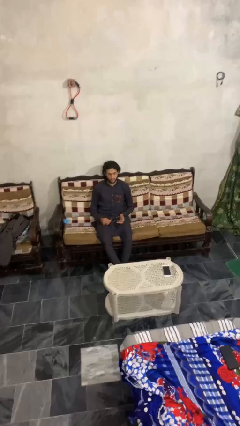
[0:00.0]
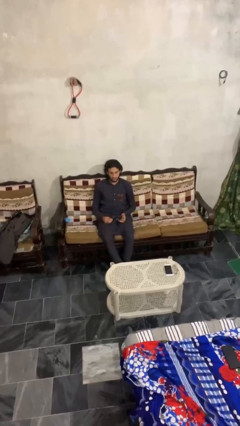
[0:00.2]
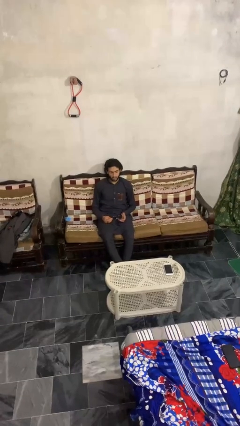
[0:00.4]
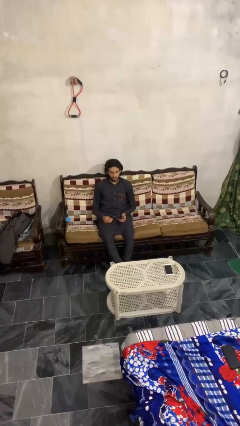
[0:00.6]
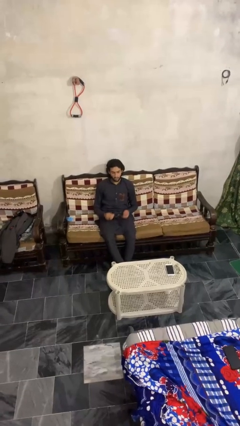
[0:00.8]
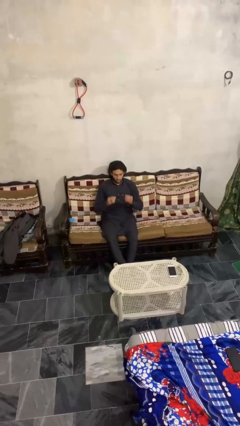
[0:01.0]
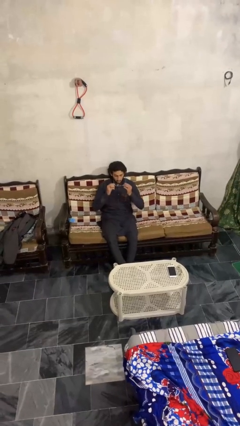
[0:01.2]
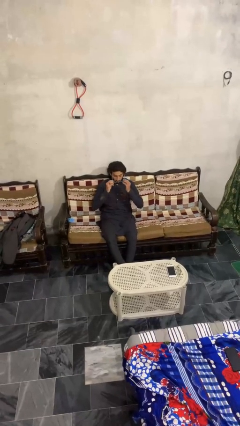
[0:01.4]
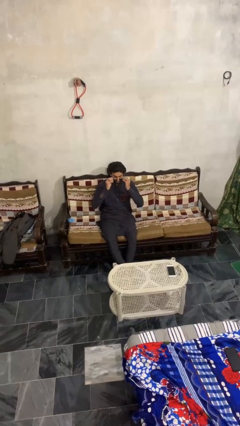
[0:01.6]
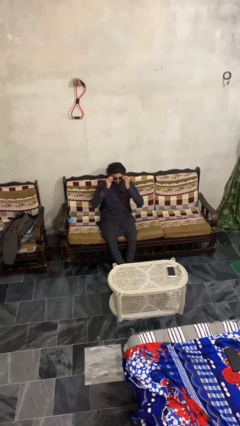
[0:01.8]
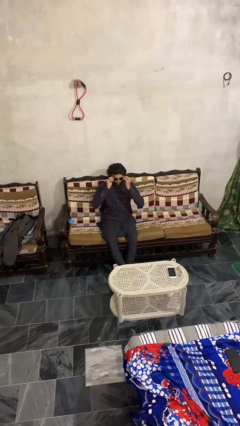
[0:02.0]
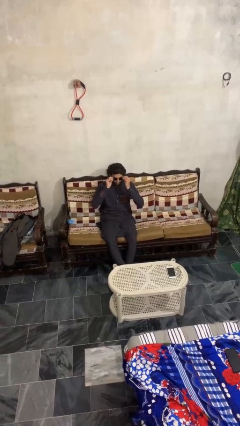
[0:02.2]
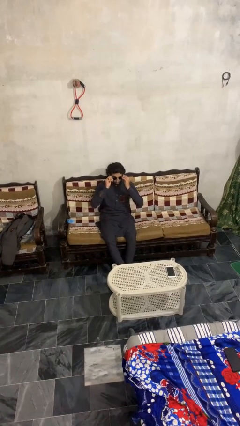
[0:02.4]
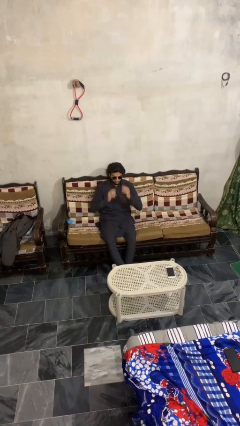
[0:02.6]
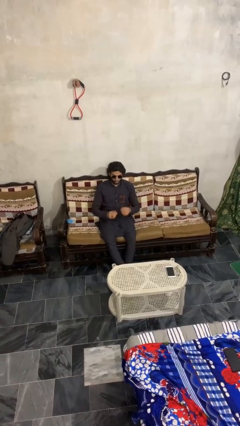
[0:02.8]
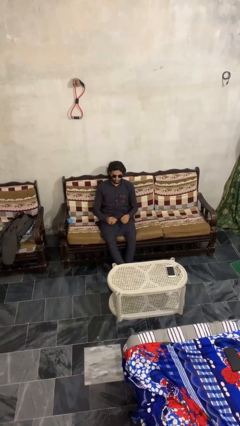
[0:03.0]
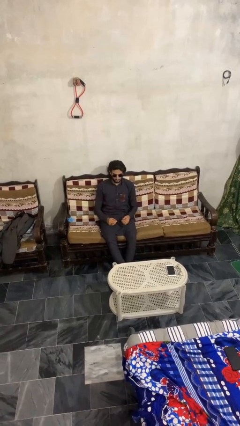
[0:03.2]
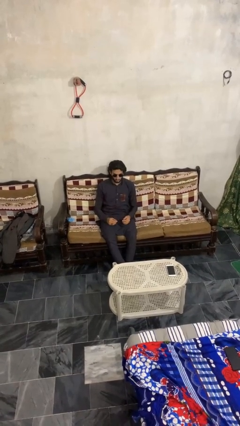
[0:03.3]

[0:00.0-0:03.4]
person puts on sunglasses

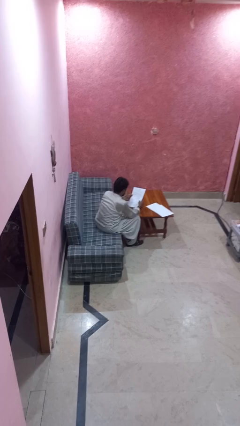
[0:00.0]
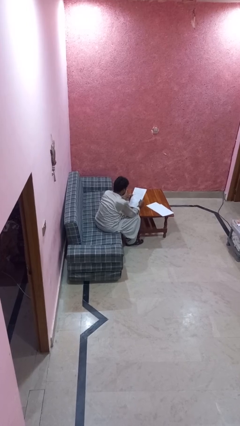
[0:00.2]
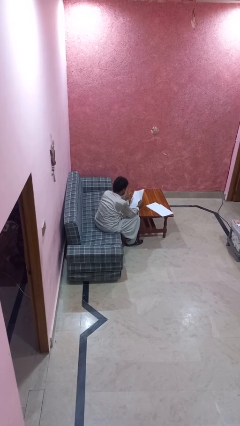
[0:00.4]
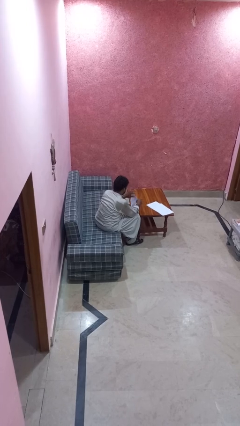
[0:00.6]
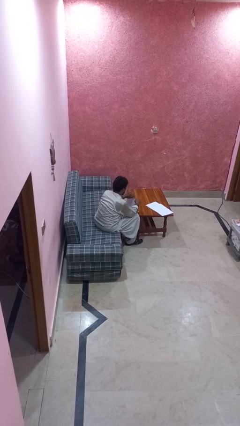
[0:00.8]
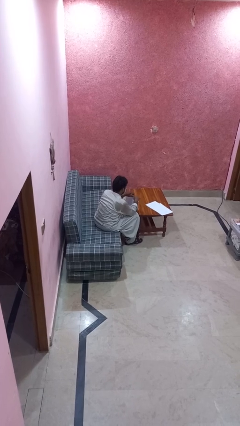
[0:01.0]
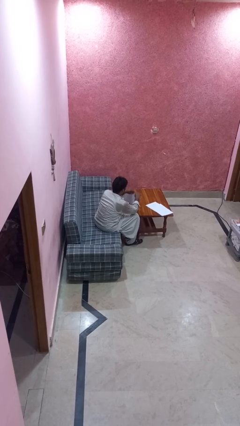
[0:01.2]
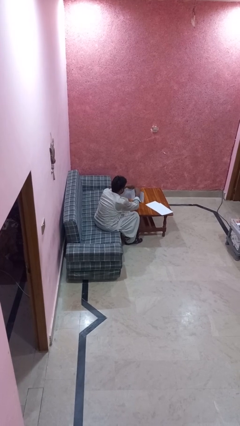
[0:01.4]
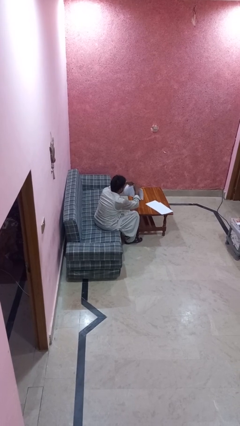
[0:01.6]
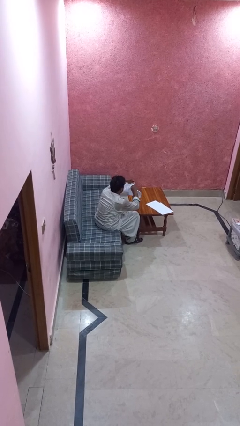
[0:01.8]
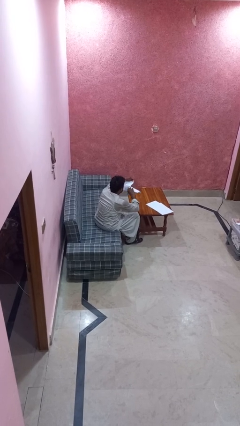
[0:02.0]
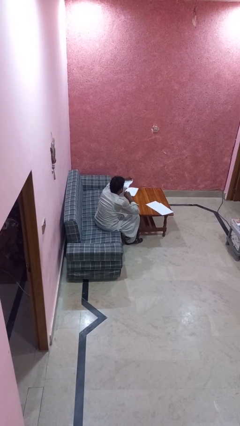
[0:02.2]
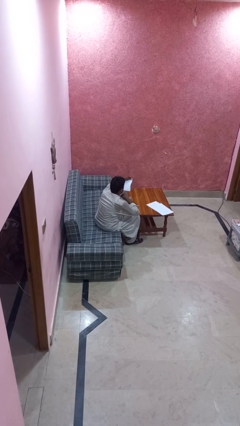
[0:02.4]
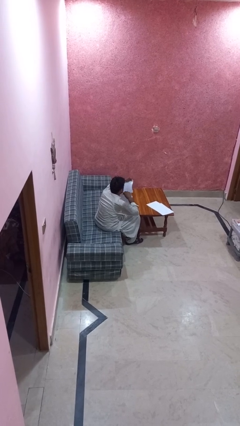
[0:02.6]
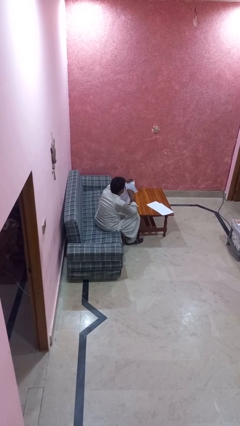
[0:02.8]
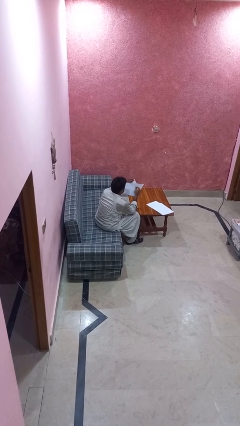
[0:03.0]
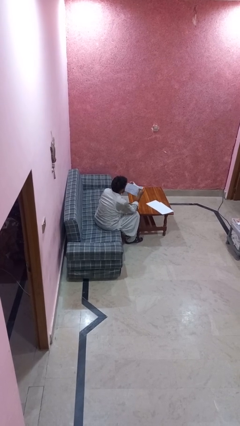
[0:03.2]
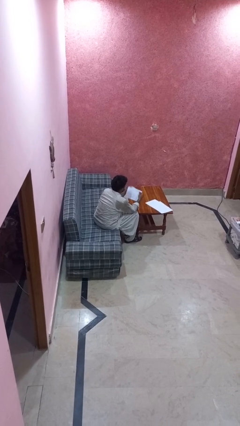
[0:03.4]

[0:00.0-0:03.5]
person tears paper

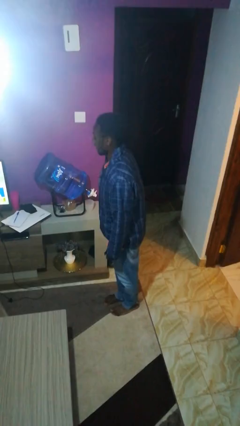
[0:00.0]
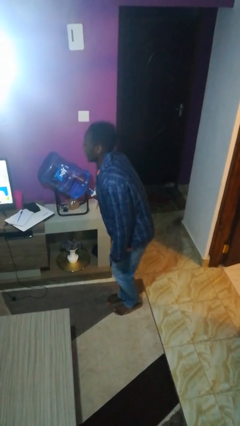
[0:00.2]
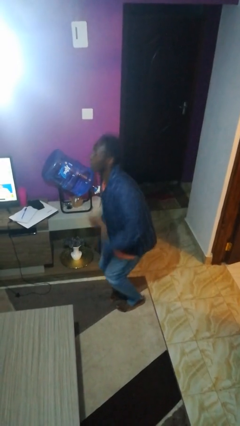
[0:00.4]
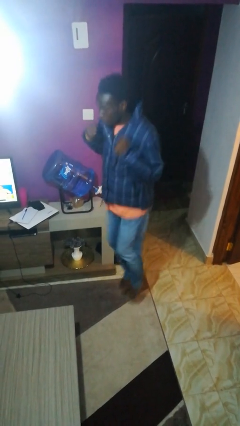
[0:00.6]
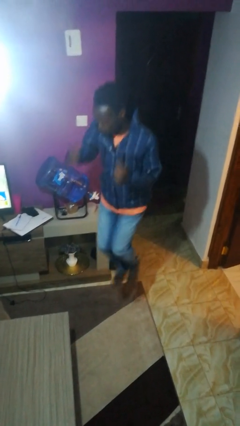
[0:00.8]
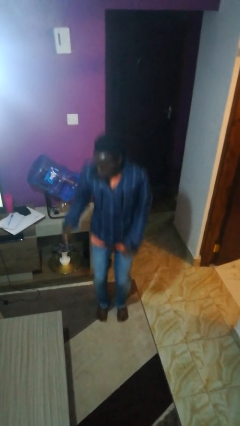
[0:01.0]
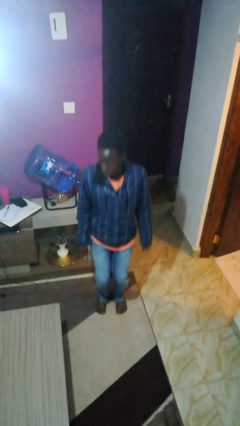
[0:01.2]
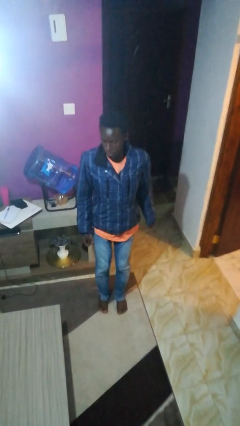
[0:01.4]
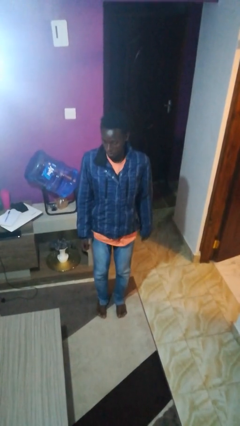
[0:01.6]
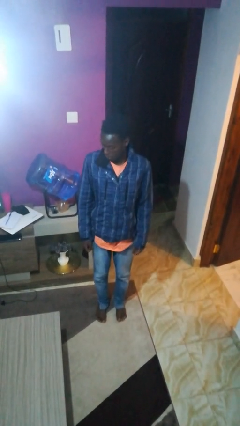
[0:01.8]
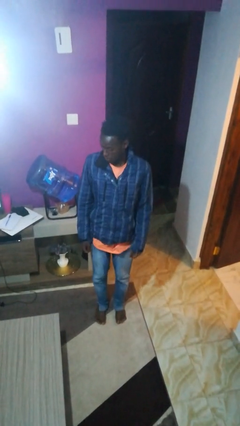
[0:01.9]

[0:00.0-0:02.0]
person jumps

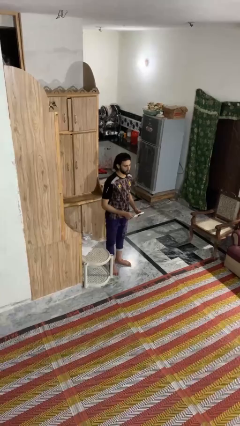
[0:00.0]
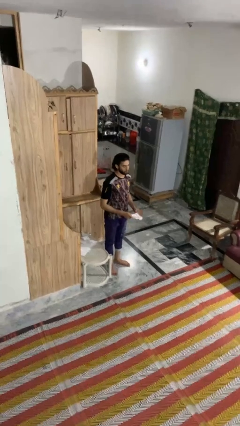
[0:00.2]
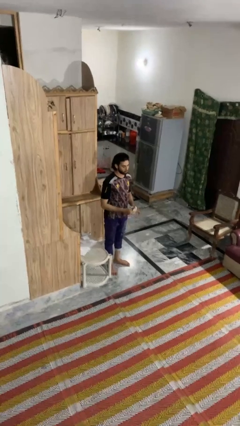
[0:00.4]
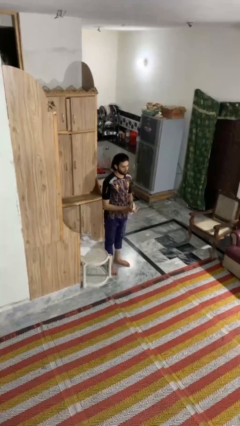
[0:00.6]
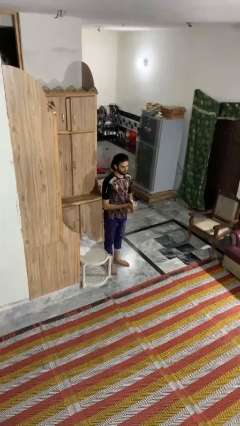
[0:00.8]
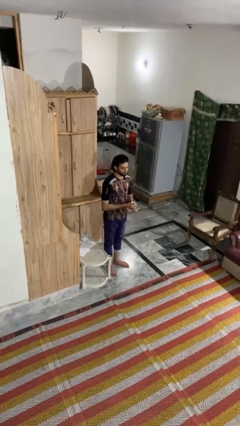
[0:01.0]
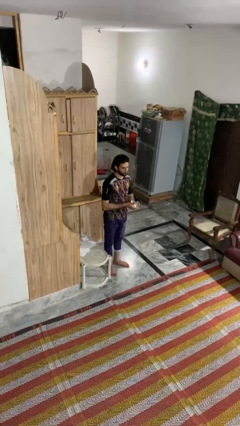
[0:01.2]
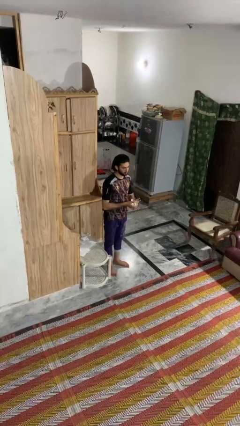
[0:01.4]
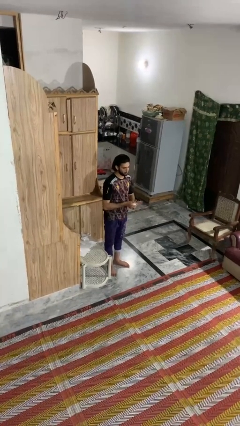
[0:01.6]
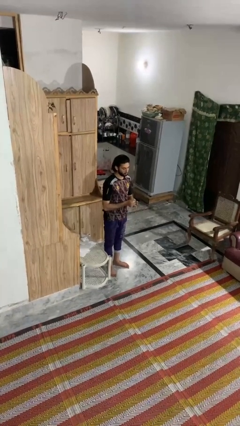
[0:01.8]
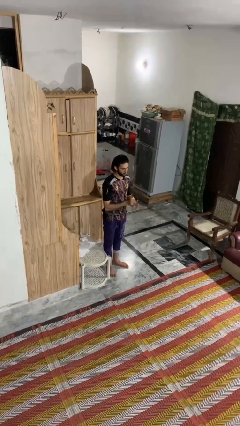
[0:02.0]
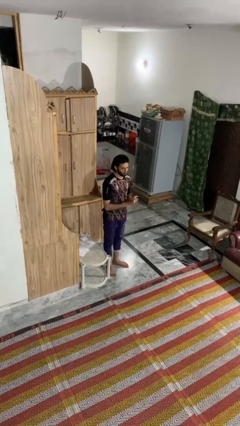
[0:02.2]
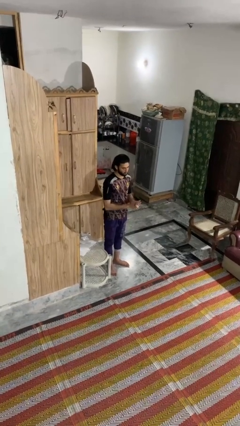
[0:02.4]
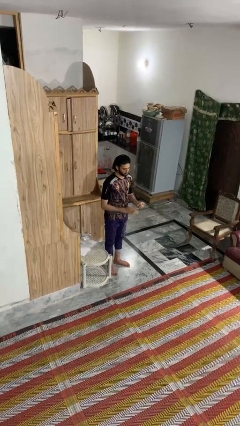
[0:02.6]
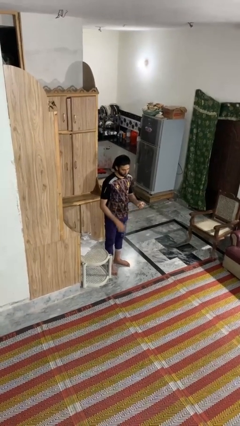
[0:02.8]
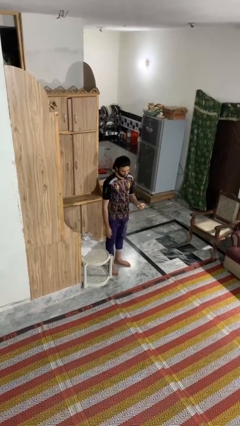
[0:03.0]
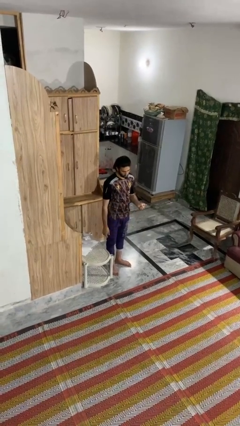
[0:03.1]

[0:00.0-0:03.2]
person crumples paper

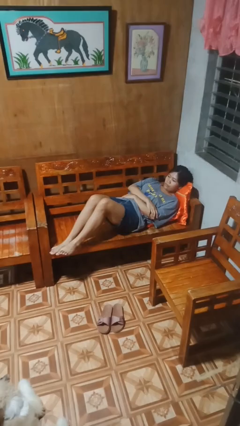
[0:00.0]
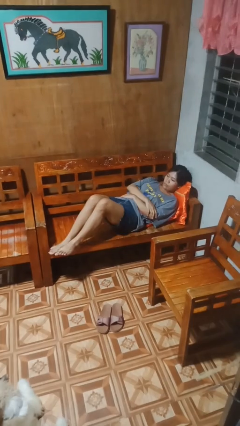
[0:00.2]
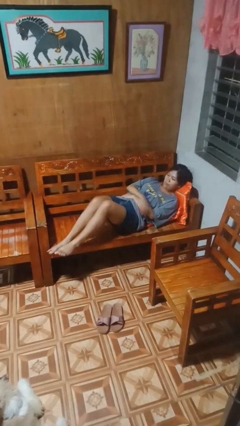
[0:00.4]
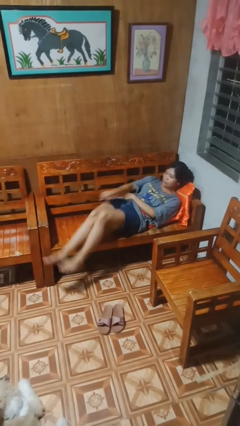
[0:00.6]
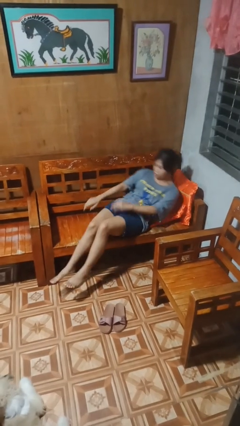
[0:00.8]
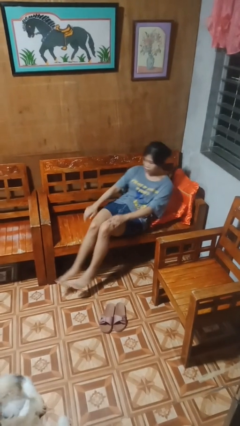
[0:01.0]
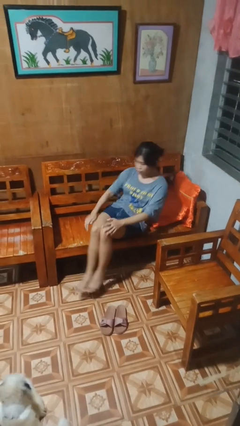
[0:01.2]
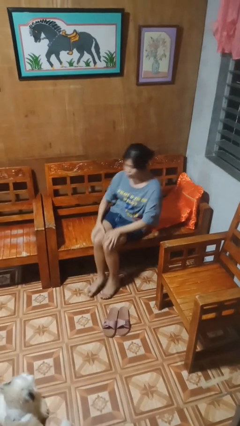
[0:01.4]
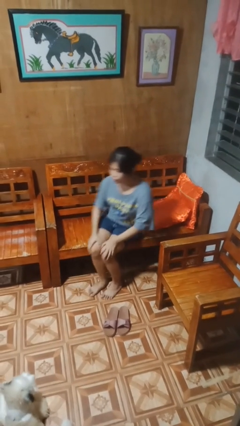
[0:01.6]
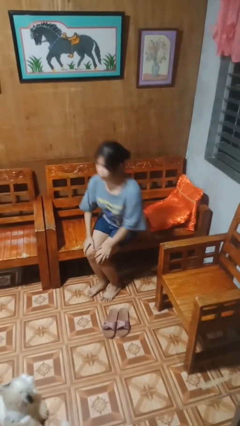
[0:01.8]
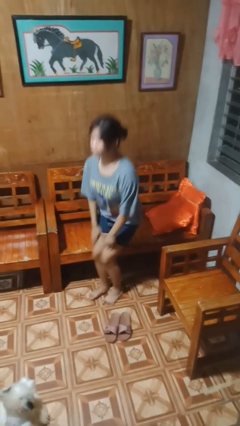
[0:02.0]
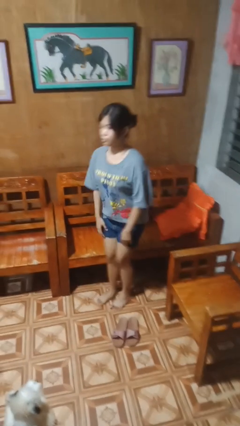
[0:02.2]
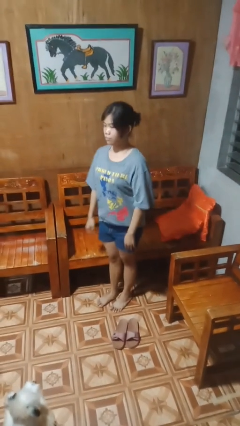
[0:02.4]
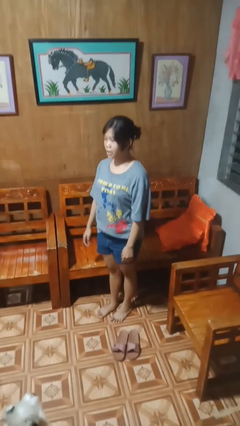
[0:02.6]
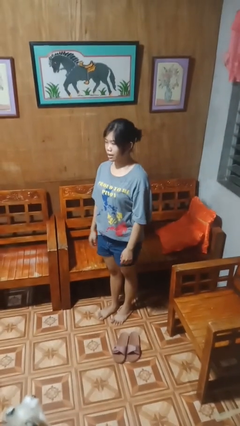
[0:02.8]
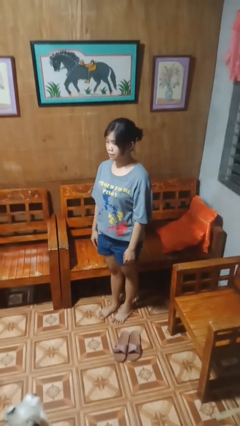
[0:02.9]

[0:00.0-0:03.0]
person stands up

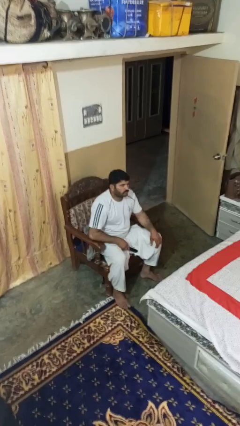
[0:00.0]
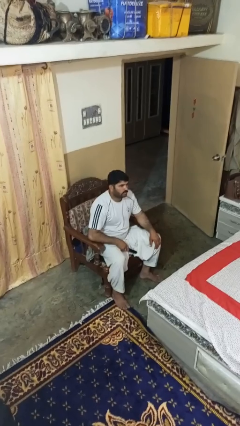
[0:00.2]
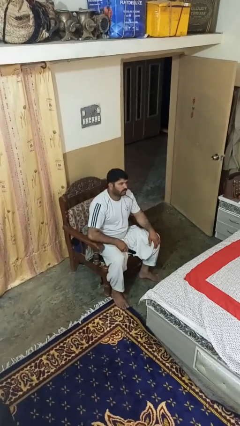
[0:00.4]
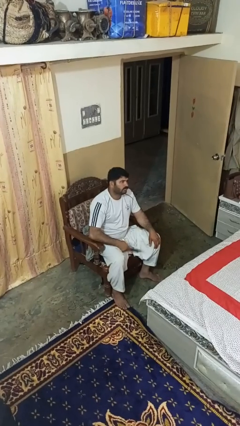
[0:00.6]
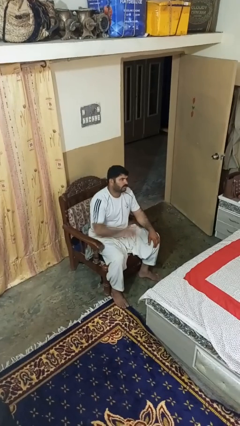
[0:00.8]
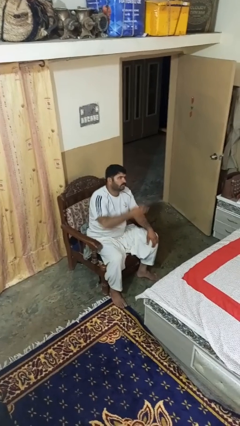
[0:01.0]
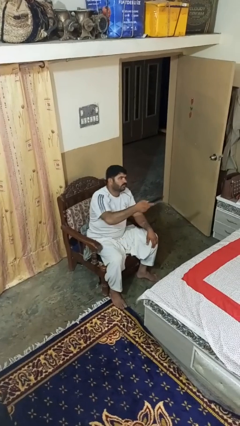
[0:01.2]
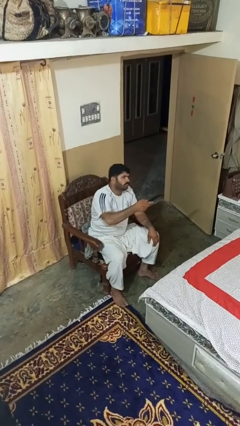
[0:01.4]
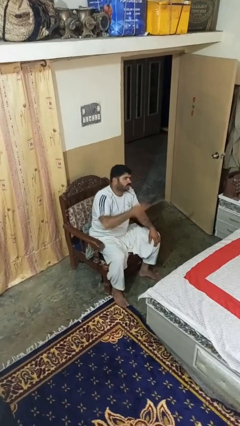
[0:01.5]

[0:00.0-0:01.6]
person uses television remote

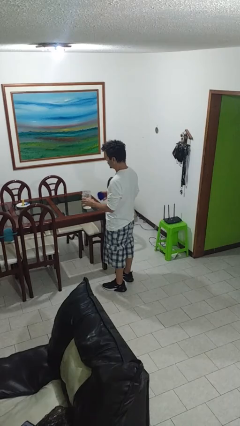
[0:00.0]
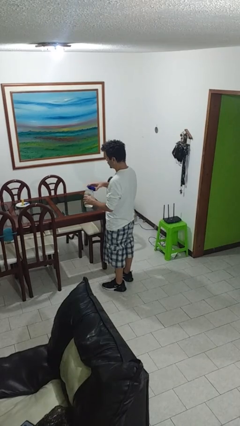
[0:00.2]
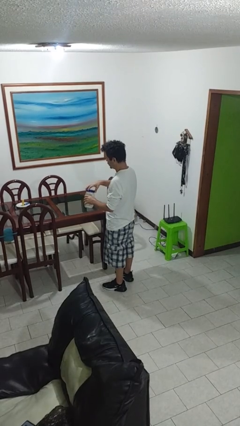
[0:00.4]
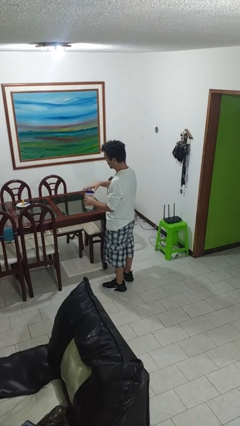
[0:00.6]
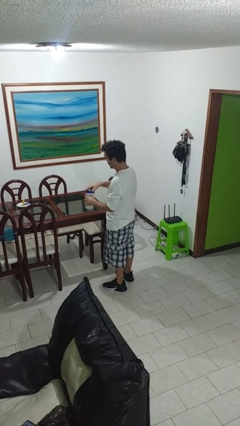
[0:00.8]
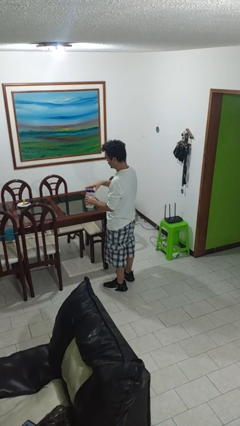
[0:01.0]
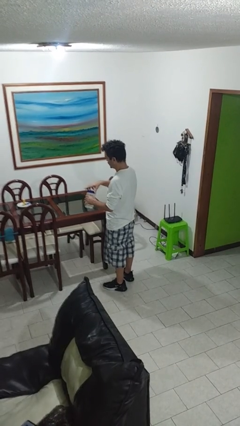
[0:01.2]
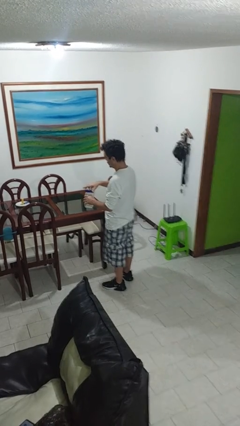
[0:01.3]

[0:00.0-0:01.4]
person closes jar
